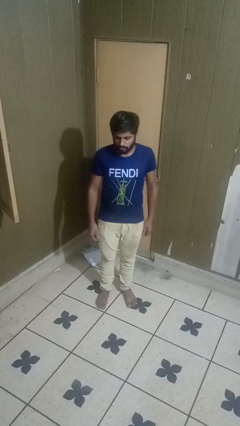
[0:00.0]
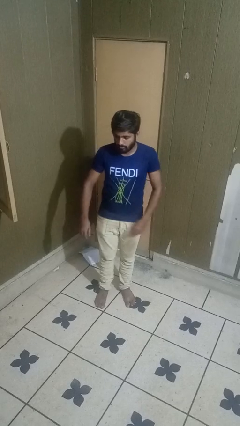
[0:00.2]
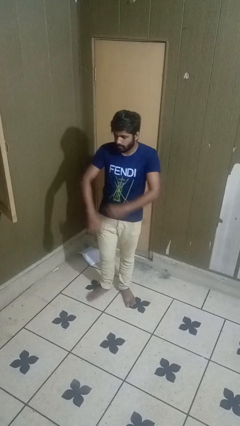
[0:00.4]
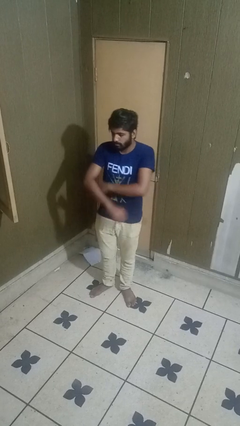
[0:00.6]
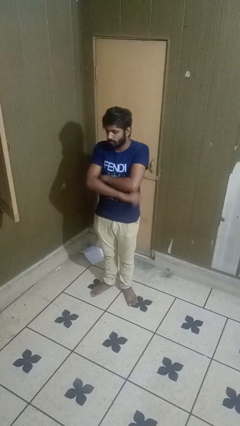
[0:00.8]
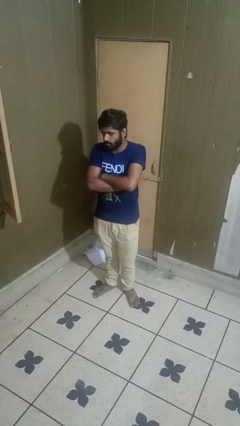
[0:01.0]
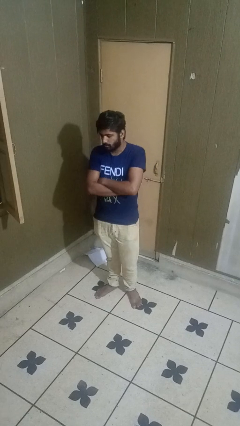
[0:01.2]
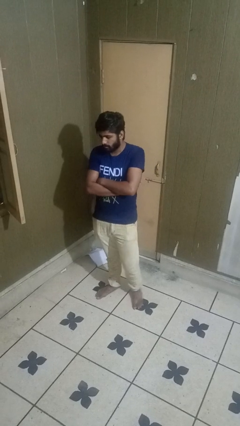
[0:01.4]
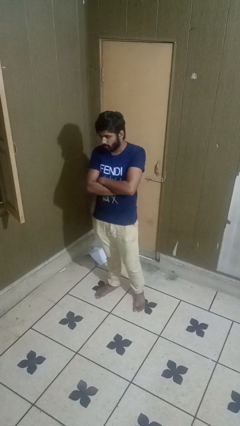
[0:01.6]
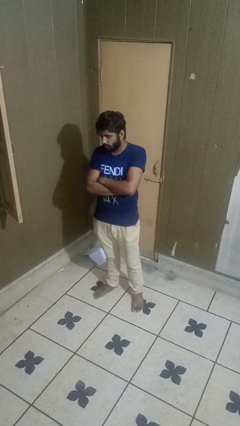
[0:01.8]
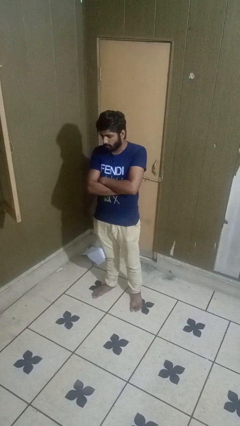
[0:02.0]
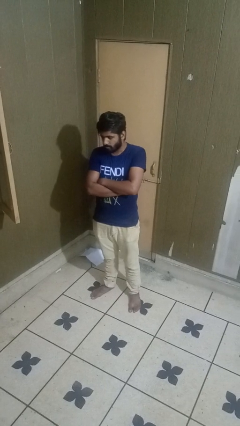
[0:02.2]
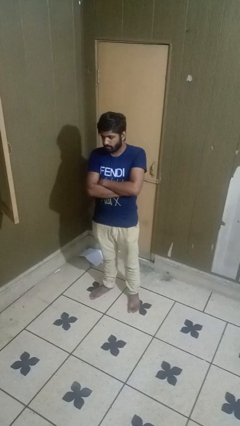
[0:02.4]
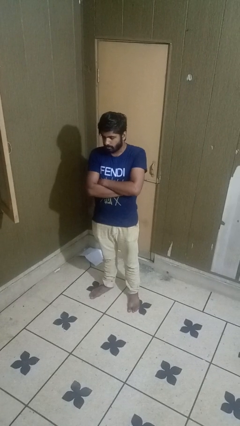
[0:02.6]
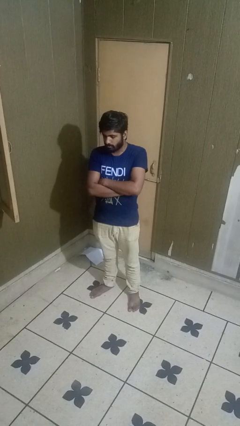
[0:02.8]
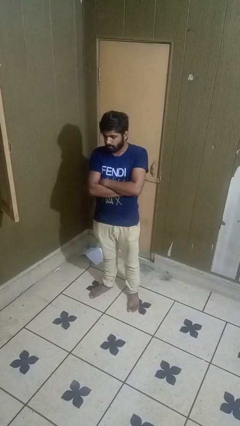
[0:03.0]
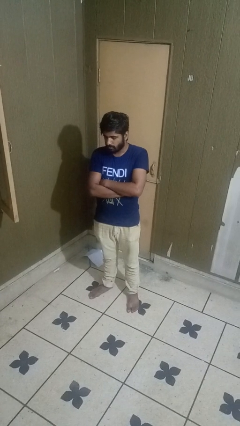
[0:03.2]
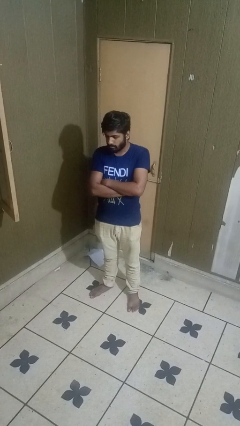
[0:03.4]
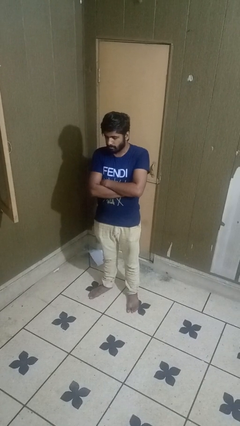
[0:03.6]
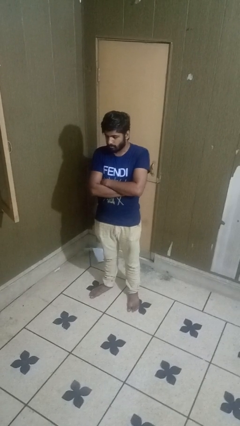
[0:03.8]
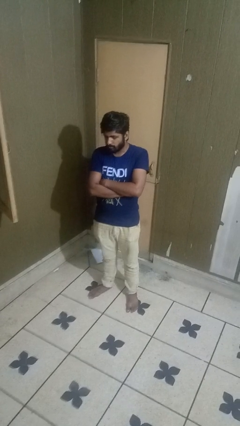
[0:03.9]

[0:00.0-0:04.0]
person crosses arms

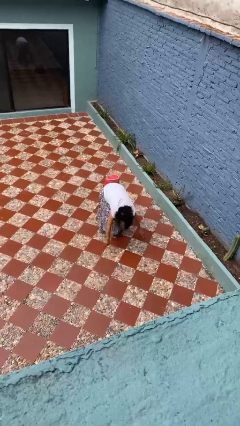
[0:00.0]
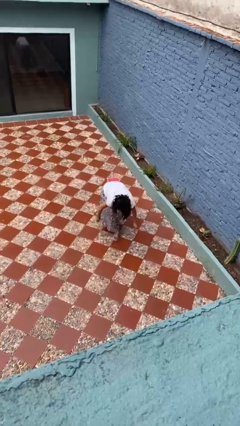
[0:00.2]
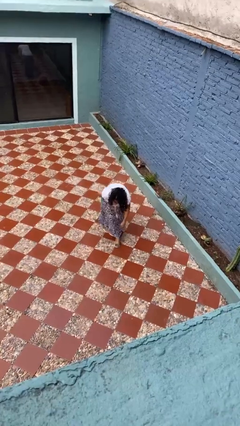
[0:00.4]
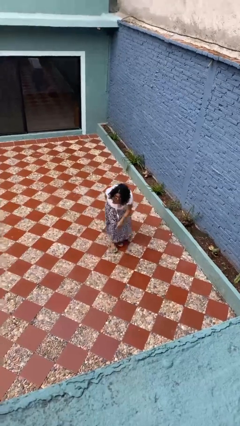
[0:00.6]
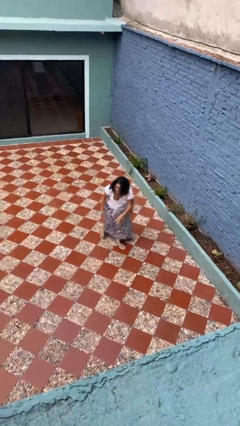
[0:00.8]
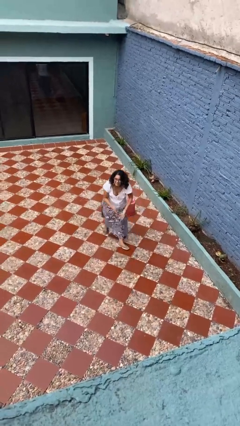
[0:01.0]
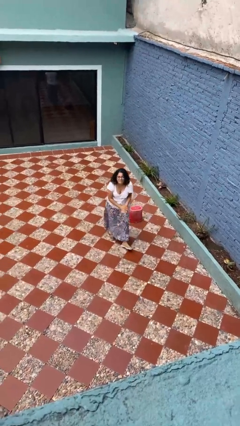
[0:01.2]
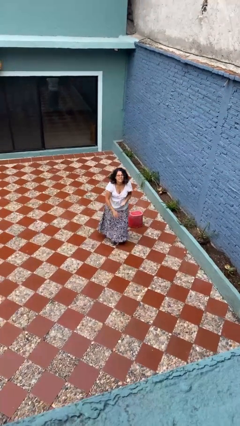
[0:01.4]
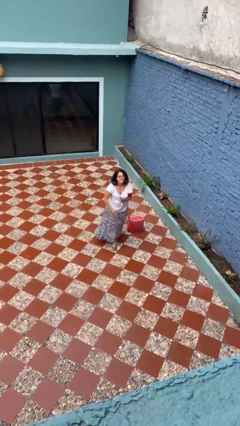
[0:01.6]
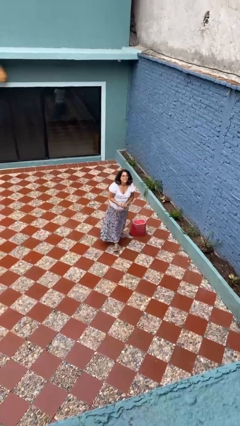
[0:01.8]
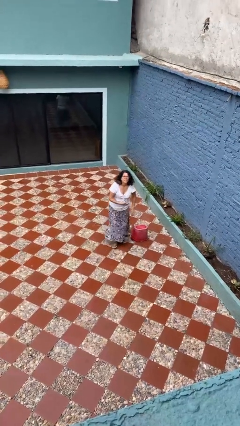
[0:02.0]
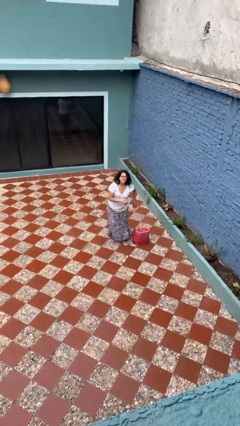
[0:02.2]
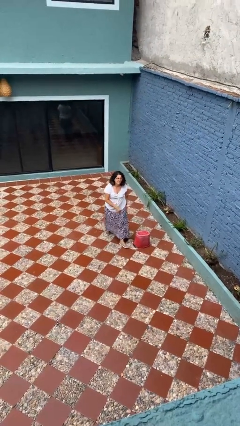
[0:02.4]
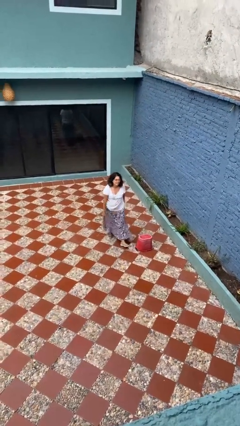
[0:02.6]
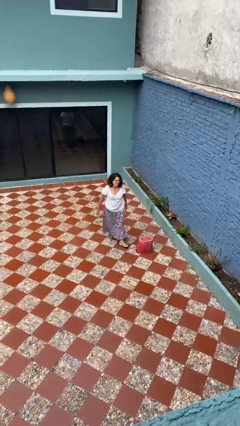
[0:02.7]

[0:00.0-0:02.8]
person stands up from floor

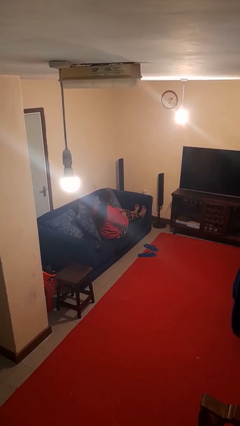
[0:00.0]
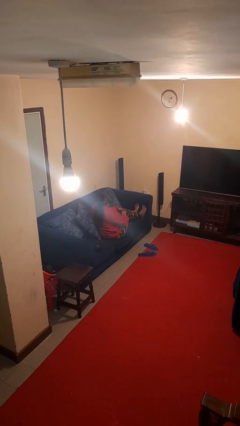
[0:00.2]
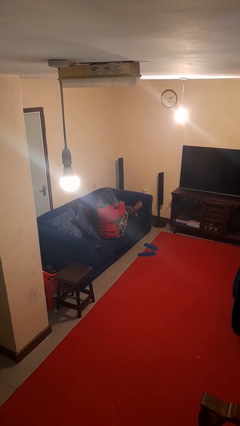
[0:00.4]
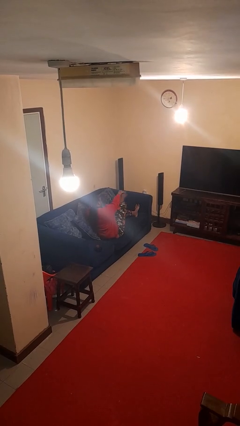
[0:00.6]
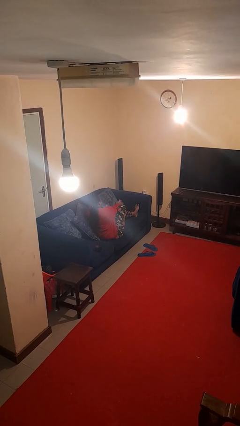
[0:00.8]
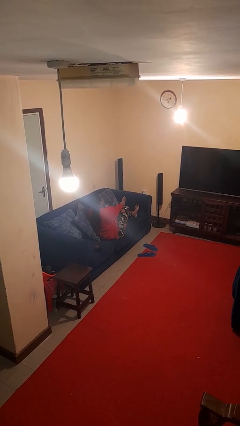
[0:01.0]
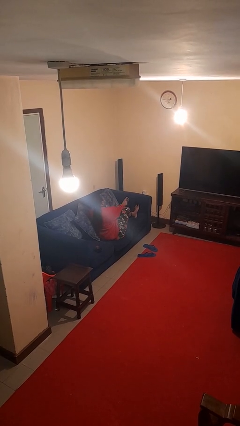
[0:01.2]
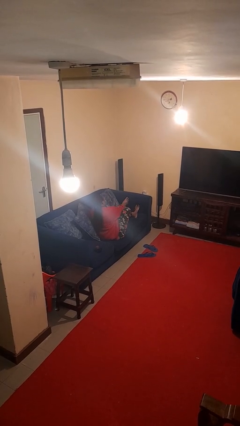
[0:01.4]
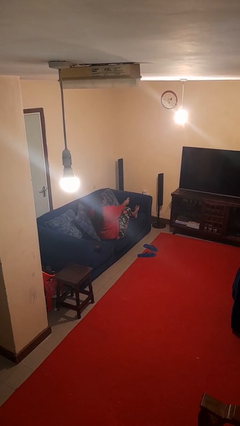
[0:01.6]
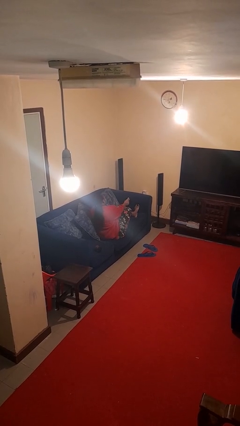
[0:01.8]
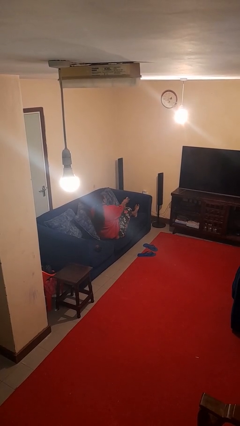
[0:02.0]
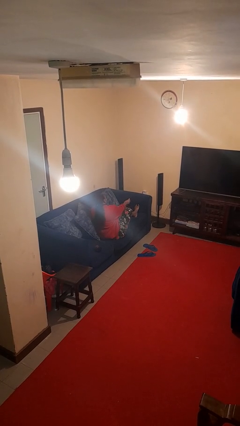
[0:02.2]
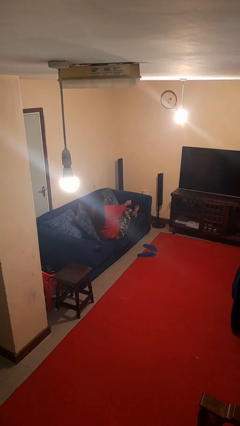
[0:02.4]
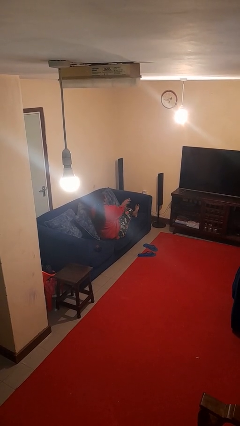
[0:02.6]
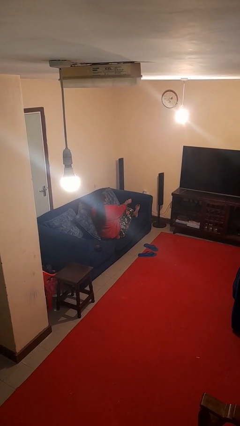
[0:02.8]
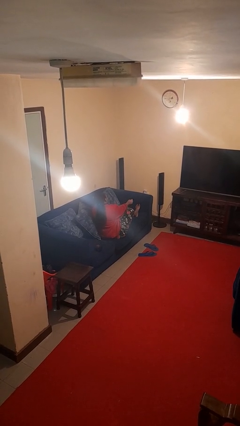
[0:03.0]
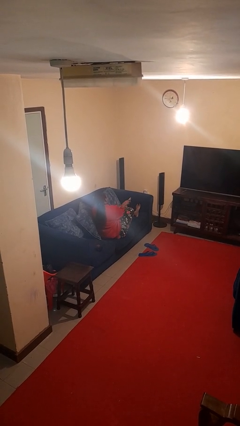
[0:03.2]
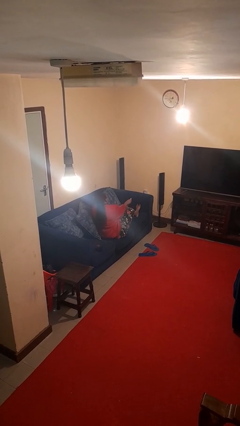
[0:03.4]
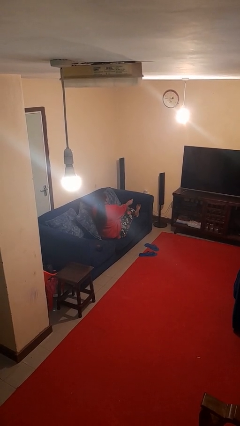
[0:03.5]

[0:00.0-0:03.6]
person rubs foot

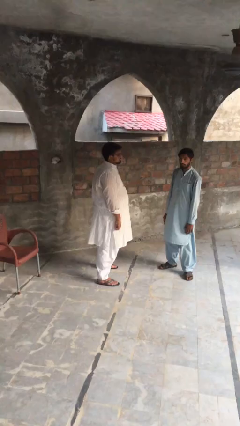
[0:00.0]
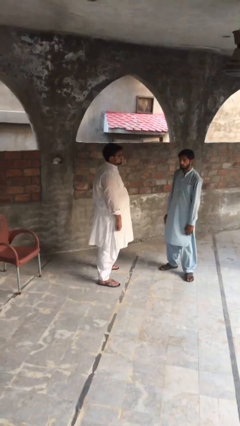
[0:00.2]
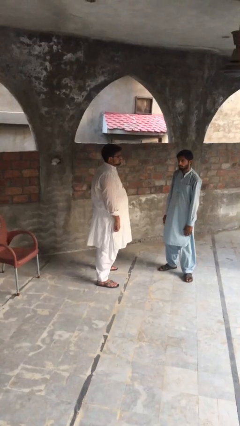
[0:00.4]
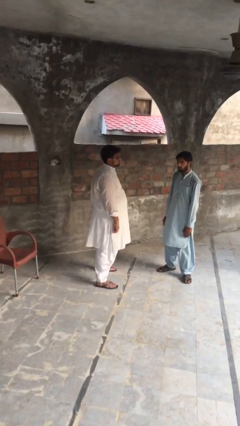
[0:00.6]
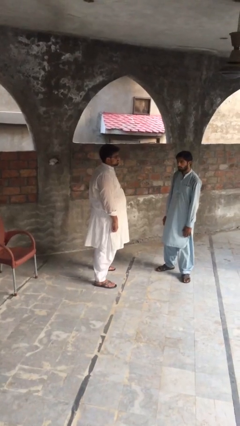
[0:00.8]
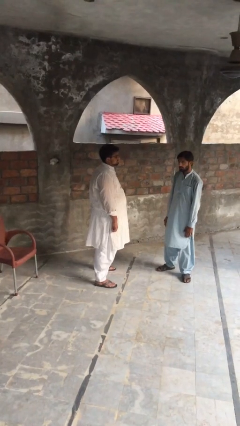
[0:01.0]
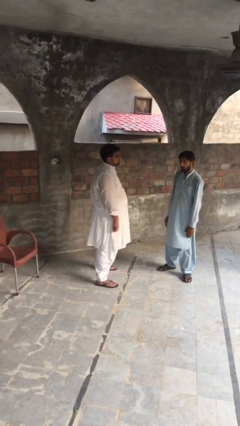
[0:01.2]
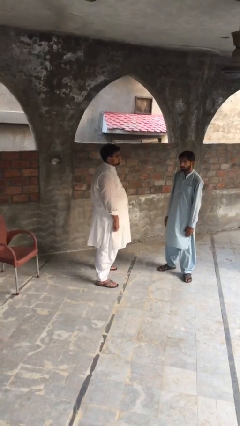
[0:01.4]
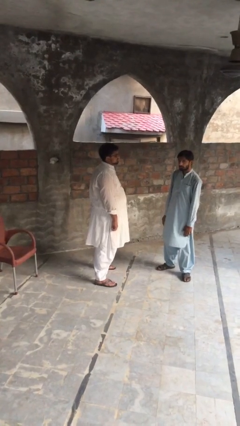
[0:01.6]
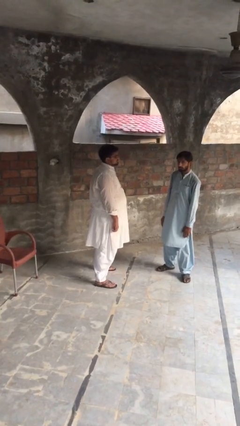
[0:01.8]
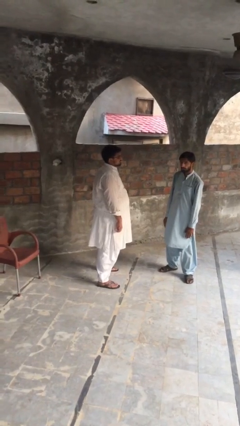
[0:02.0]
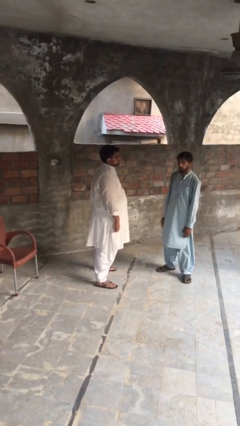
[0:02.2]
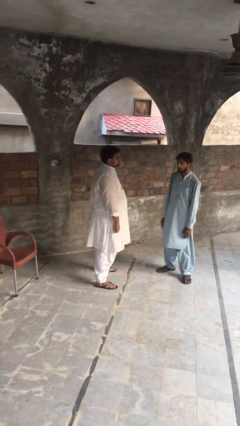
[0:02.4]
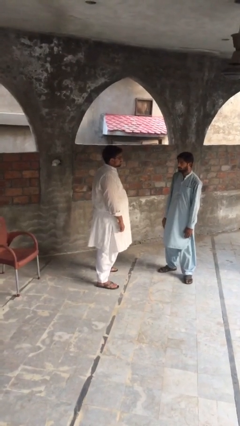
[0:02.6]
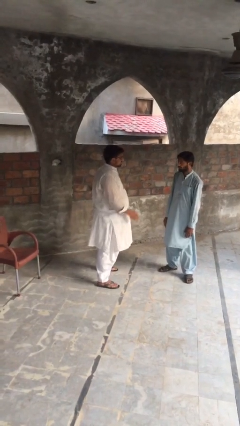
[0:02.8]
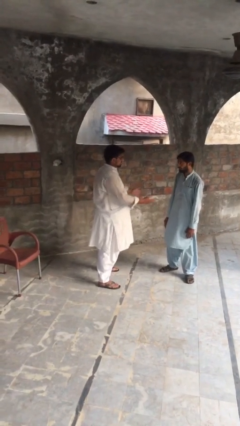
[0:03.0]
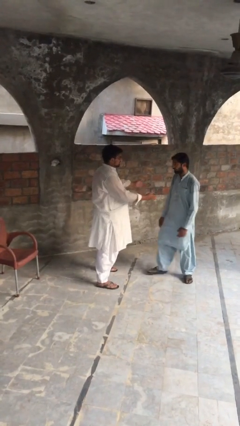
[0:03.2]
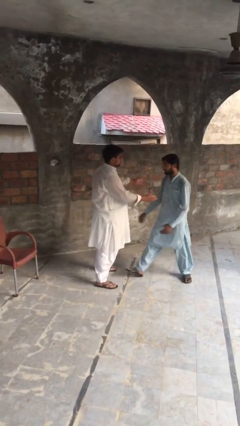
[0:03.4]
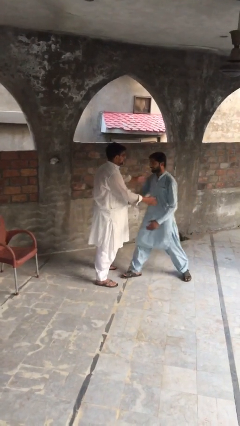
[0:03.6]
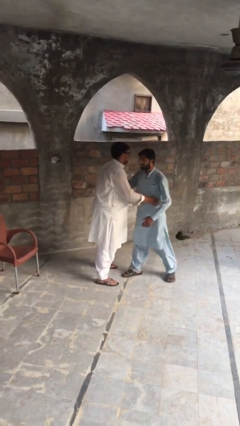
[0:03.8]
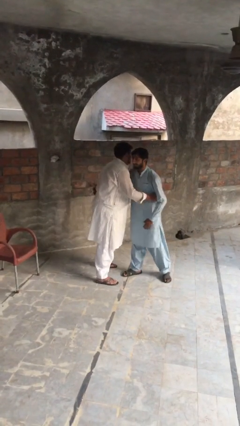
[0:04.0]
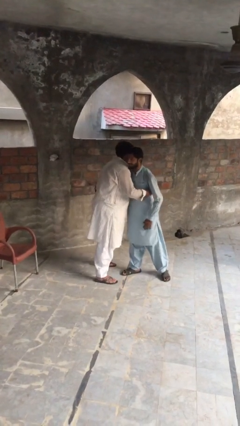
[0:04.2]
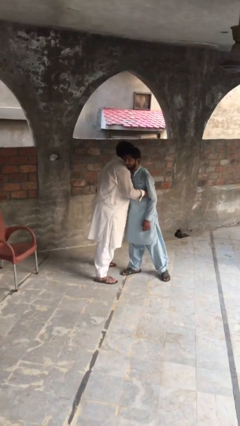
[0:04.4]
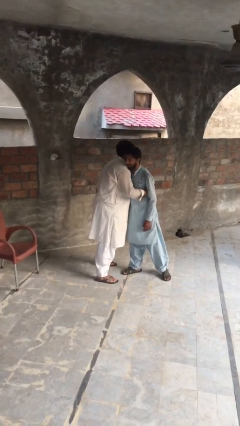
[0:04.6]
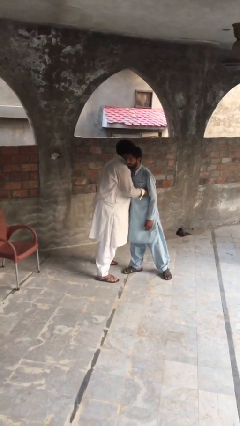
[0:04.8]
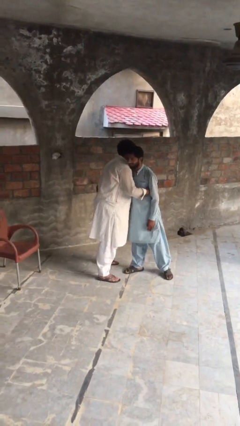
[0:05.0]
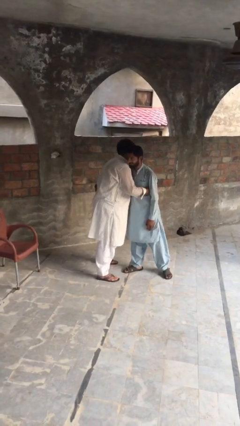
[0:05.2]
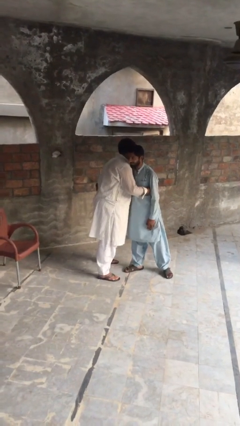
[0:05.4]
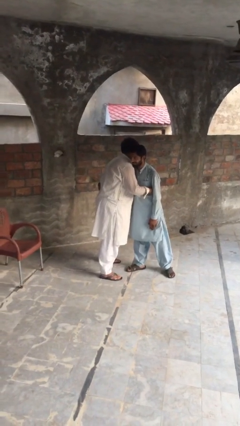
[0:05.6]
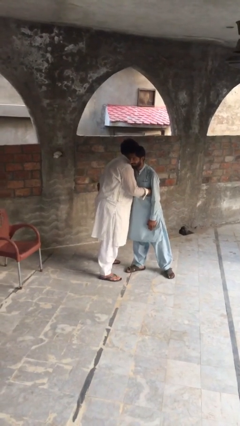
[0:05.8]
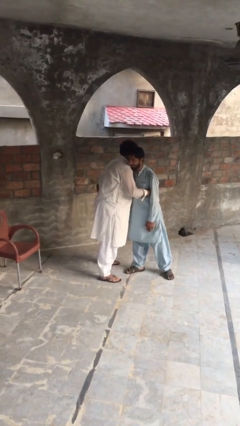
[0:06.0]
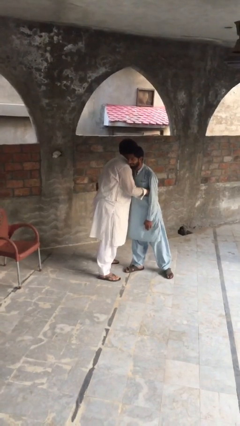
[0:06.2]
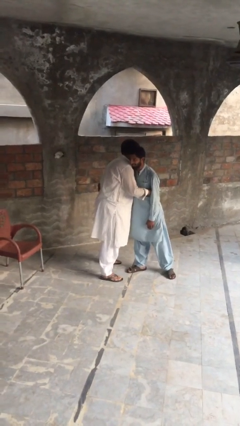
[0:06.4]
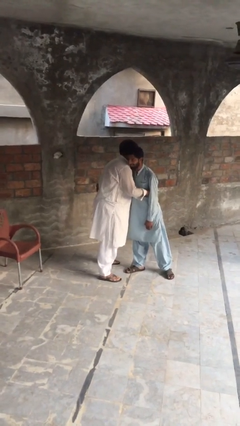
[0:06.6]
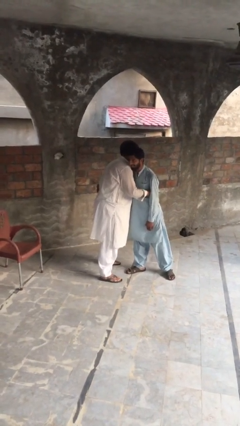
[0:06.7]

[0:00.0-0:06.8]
person embraces person

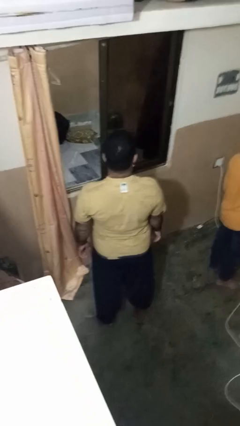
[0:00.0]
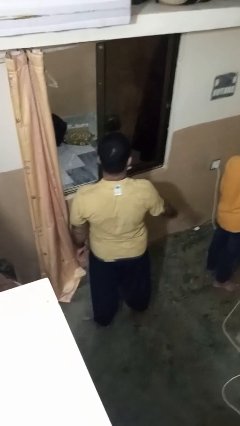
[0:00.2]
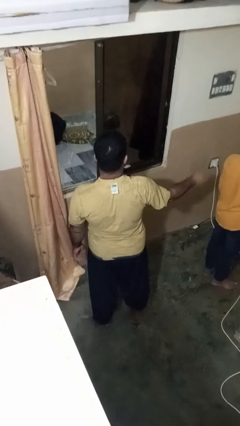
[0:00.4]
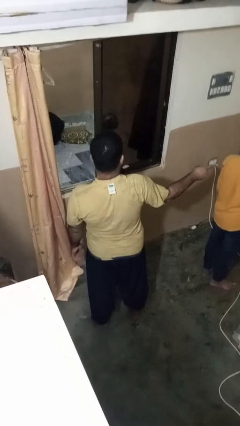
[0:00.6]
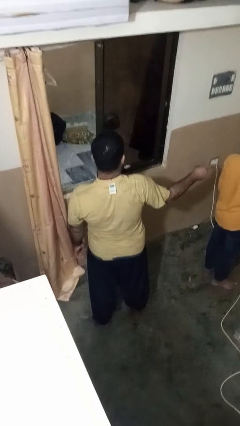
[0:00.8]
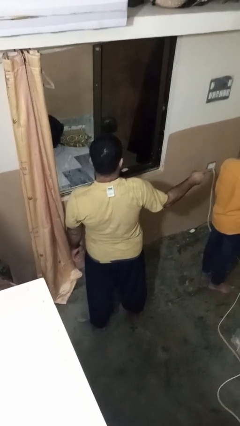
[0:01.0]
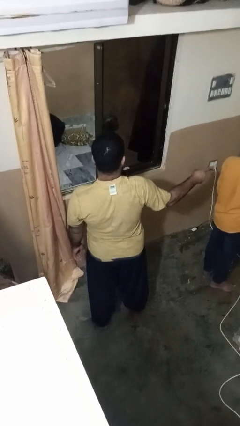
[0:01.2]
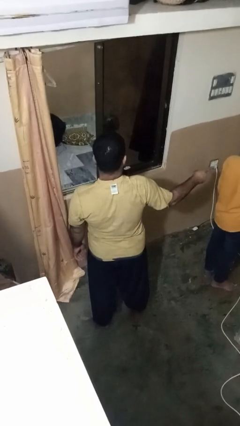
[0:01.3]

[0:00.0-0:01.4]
person points at person
